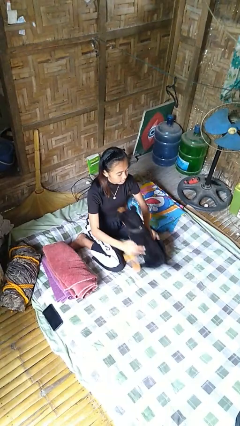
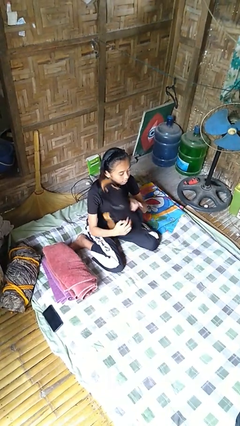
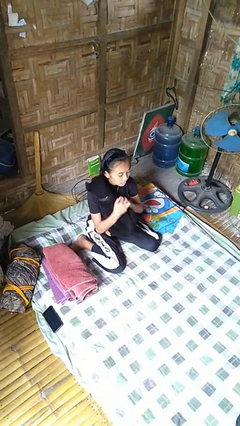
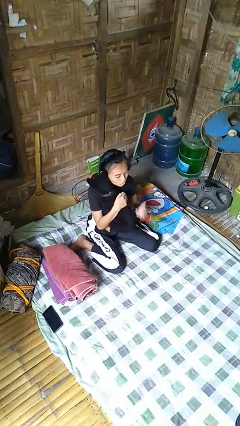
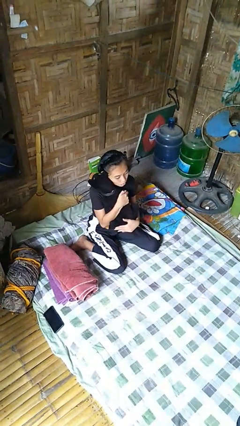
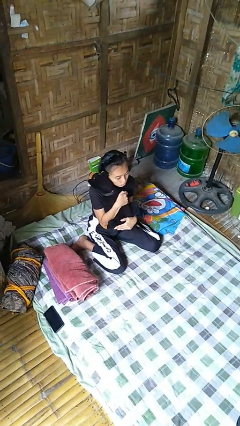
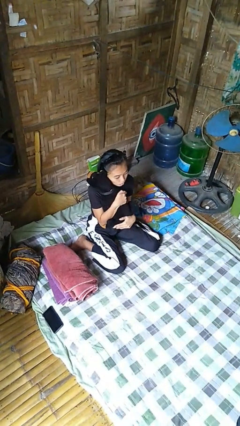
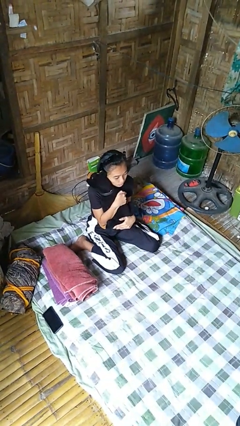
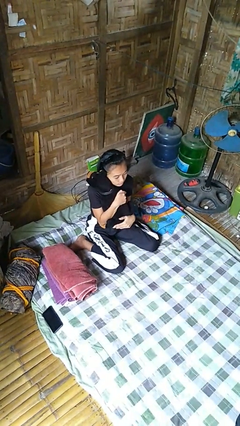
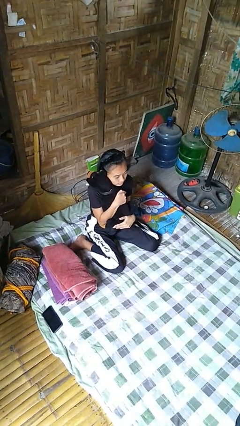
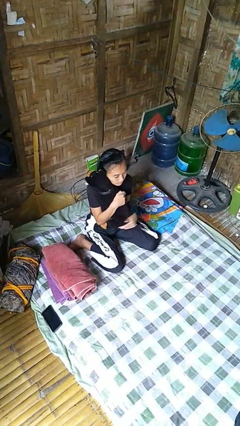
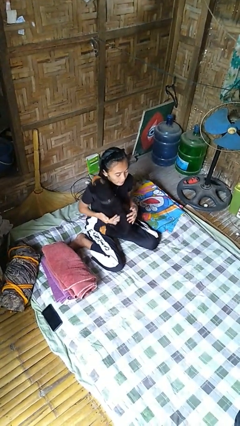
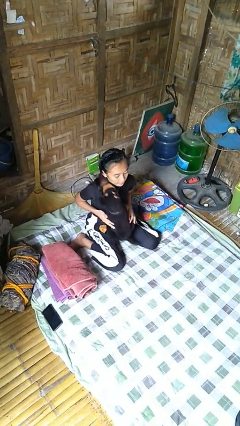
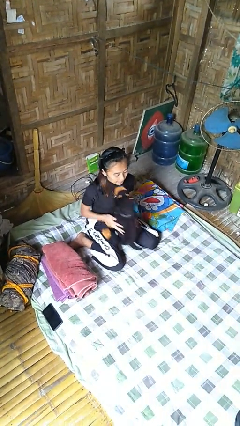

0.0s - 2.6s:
person hugs stuffed animal

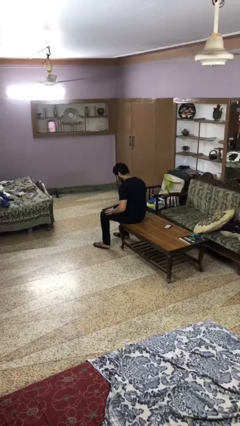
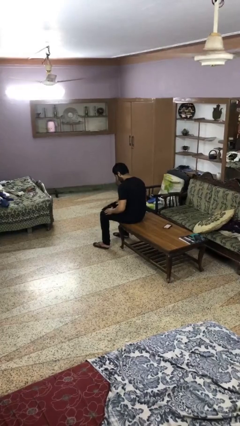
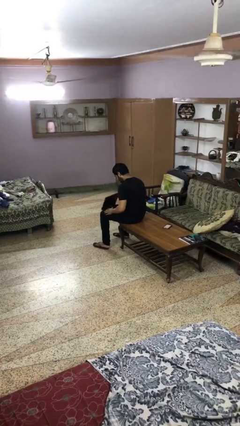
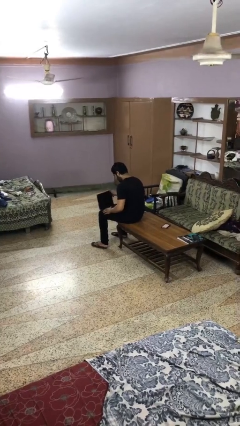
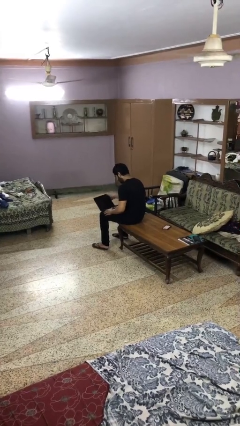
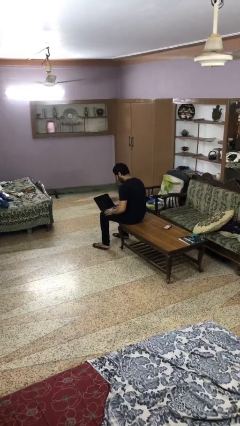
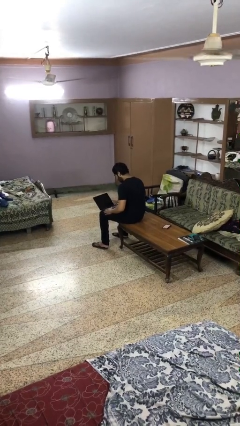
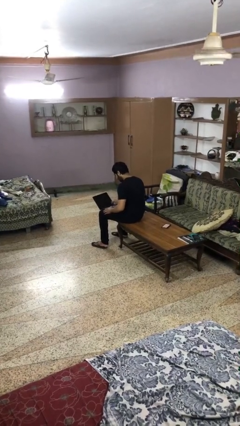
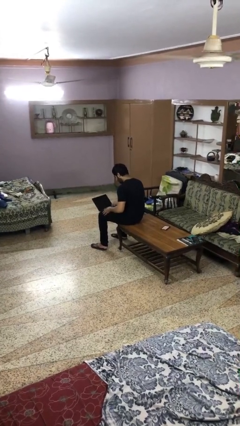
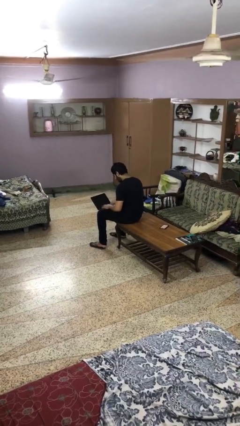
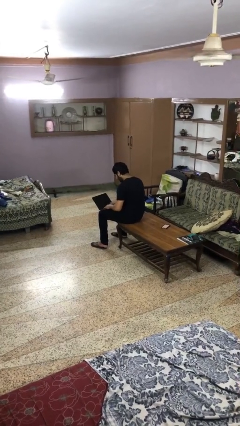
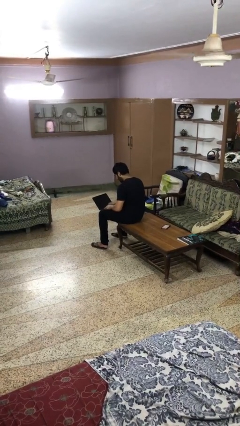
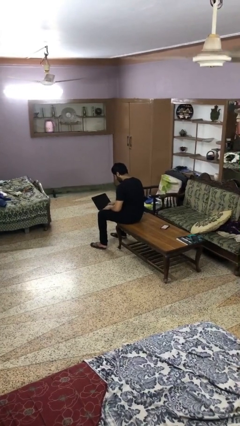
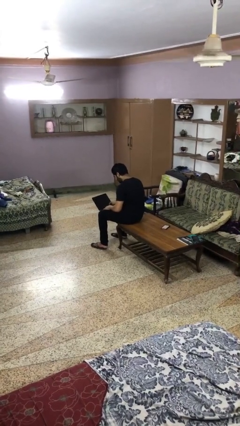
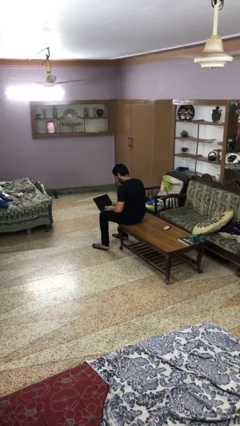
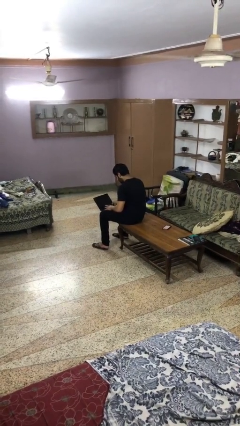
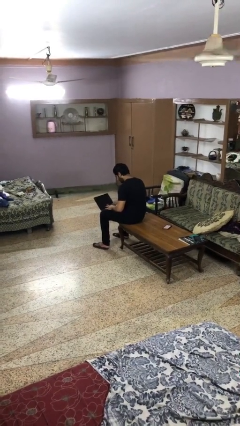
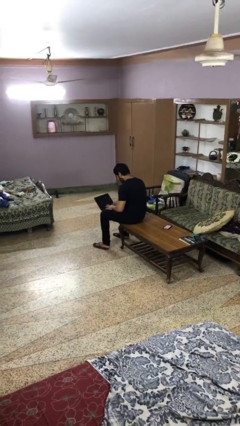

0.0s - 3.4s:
person opens laptop

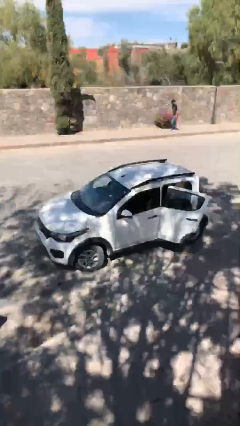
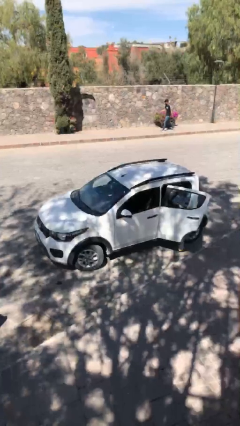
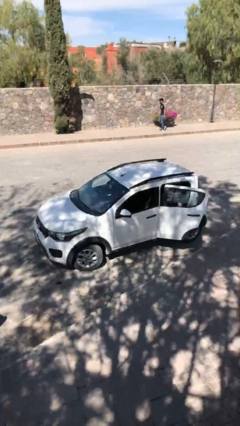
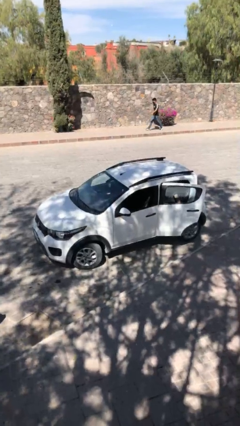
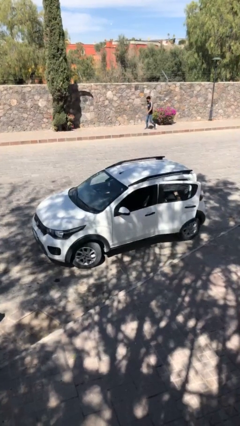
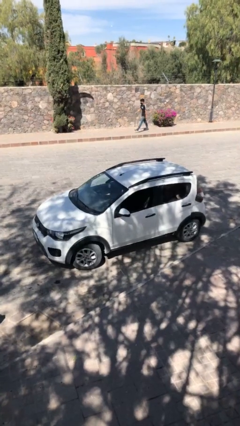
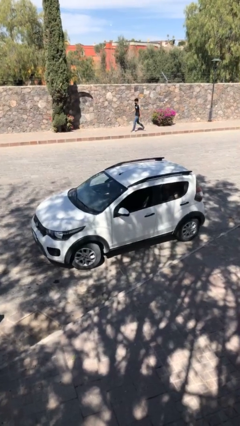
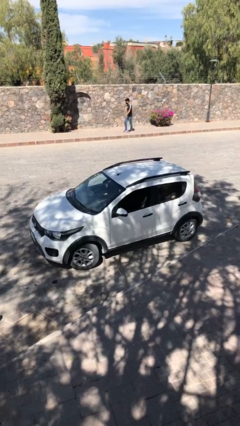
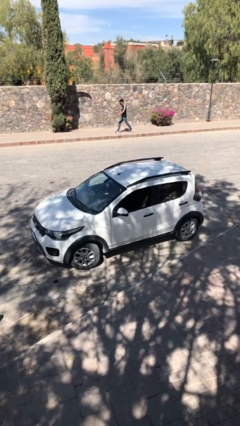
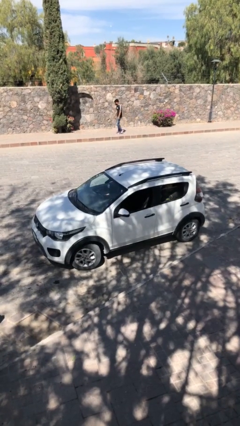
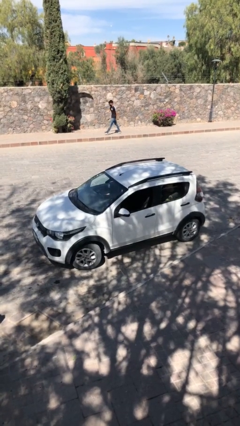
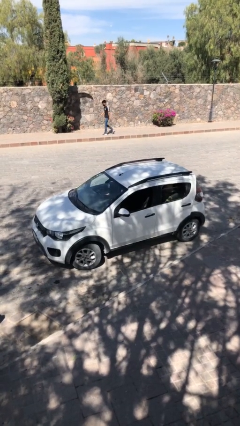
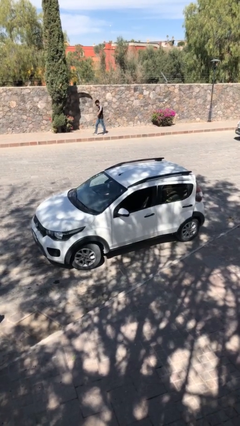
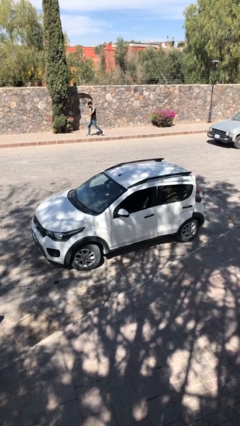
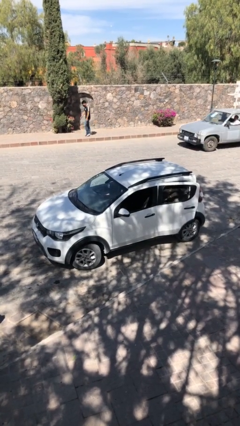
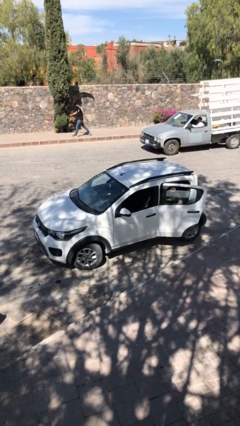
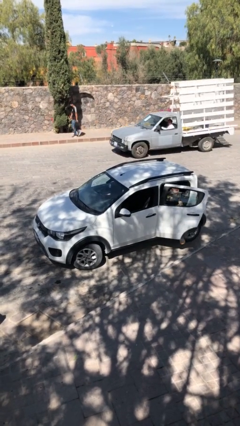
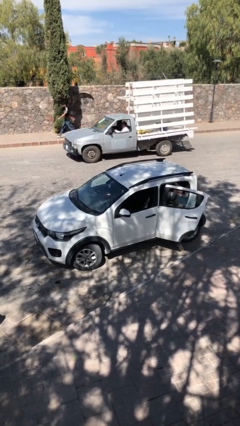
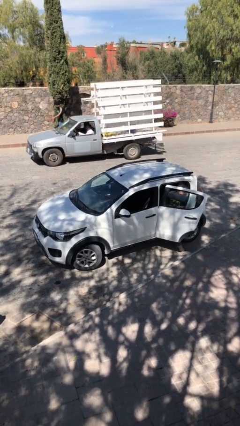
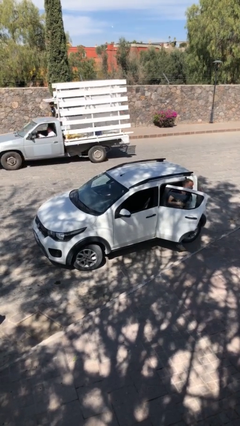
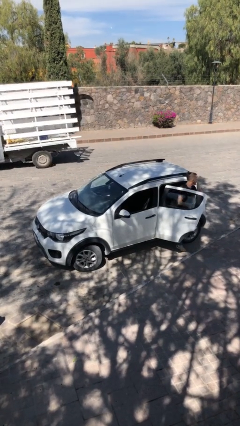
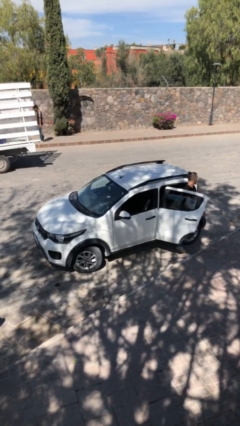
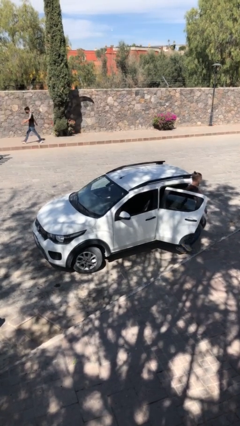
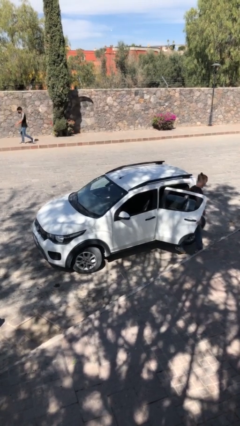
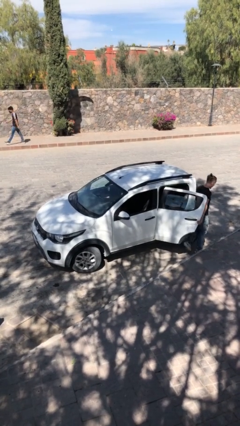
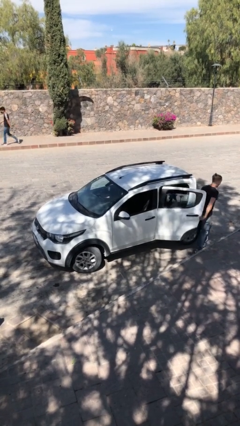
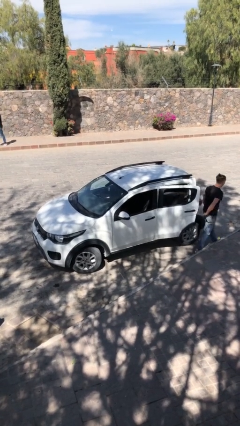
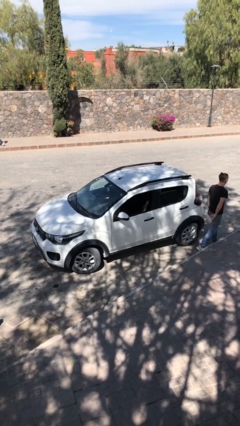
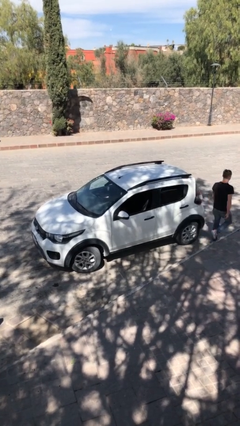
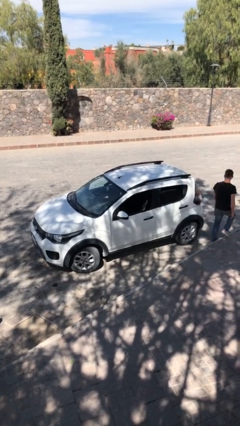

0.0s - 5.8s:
car drops off person

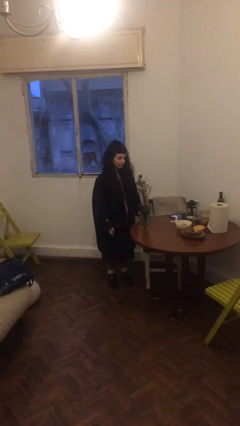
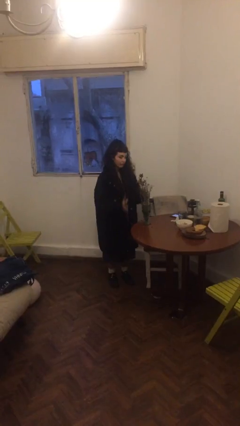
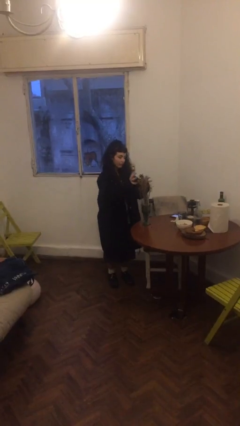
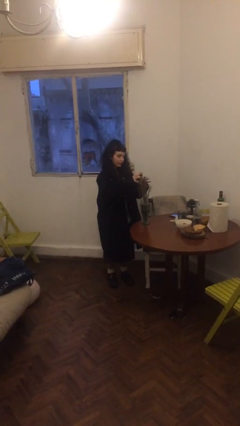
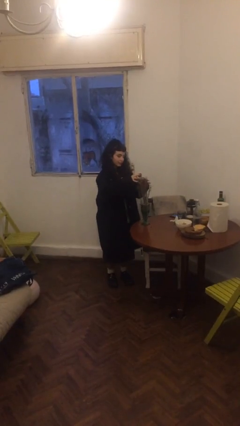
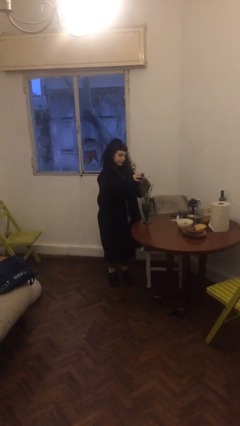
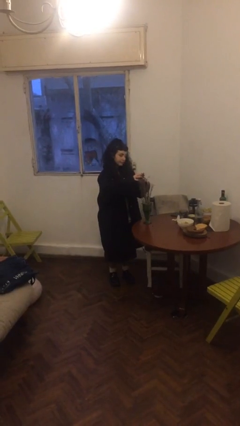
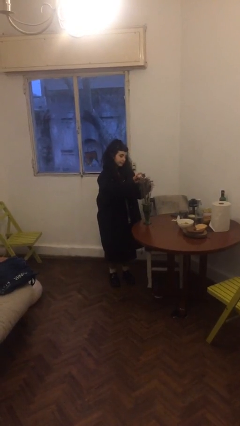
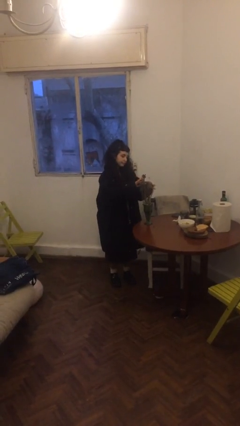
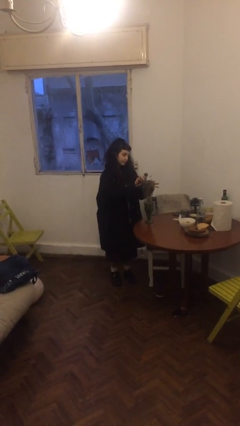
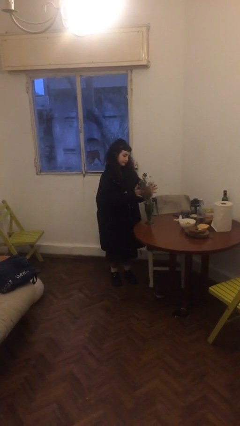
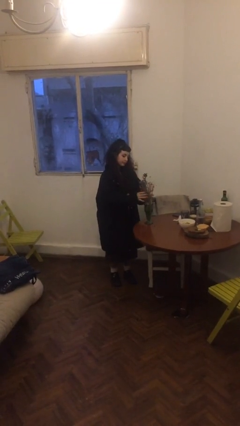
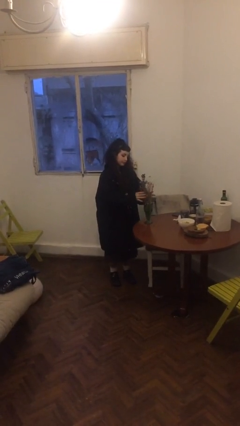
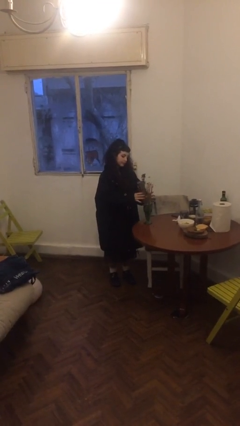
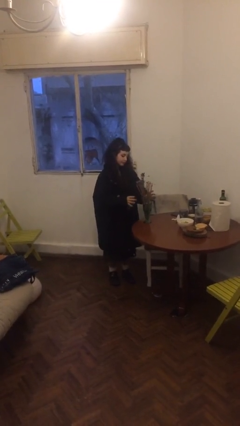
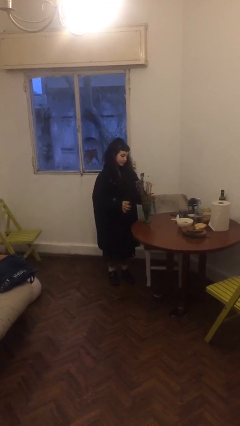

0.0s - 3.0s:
person arranges flowers in vase

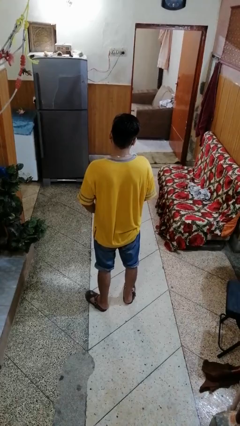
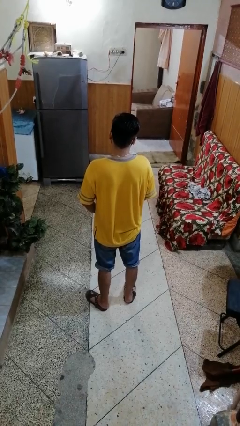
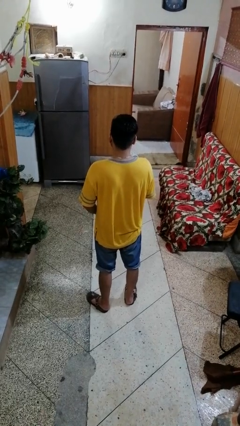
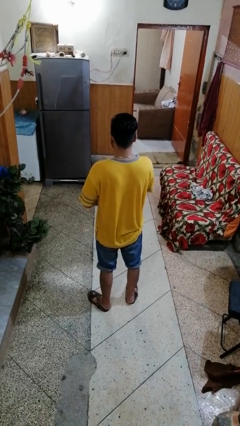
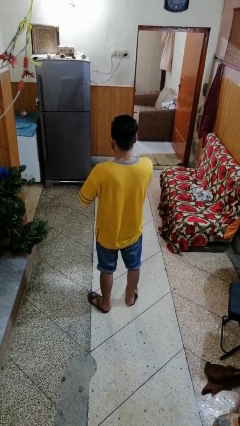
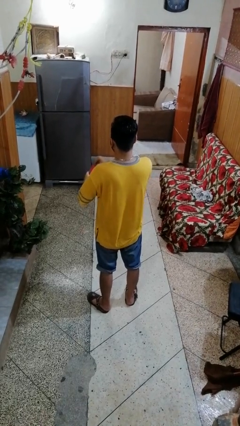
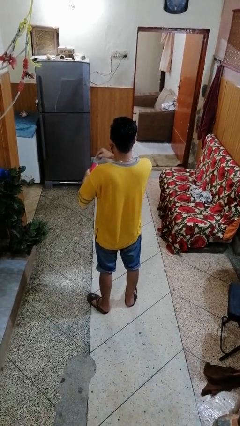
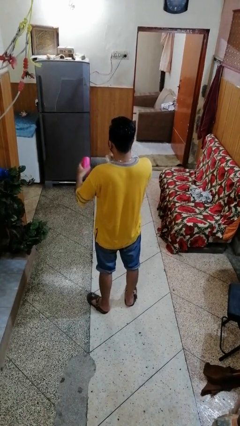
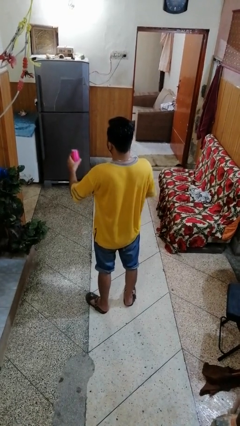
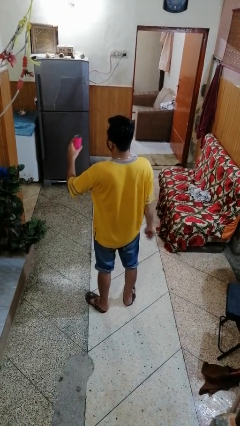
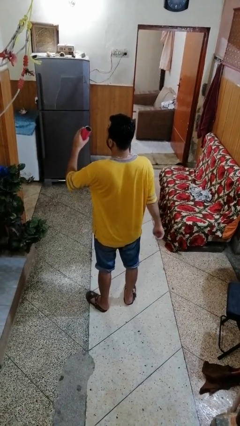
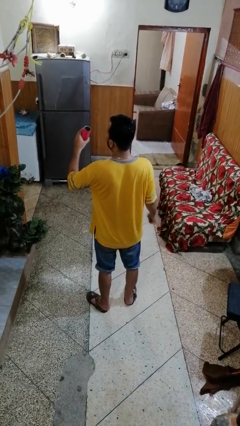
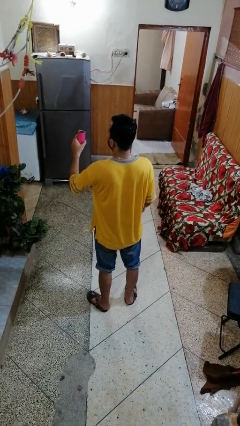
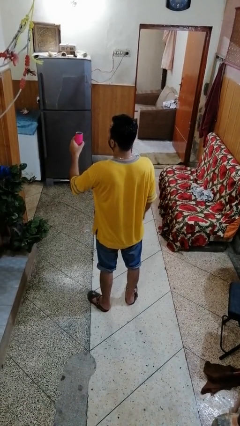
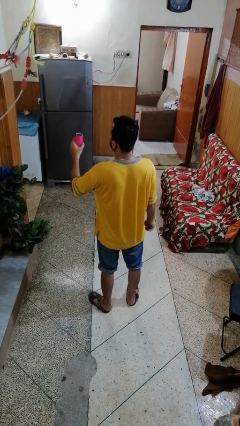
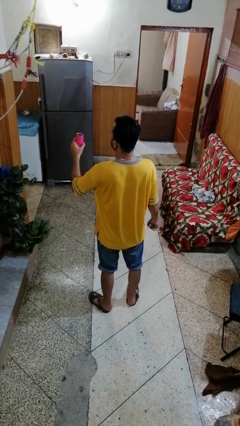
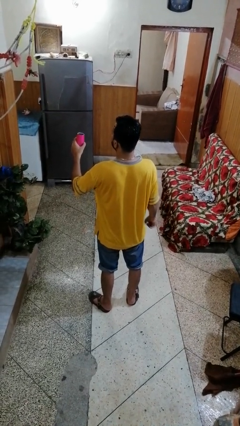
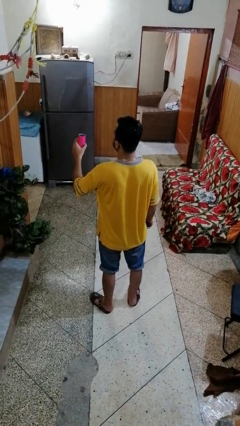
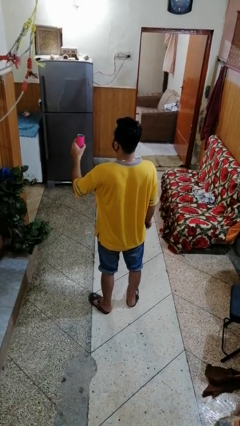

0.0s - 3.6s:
person opens beverage can
